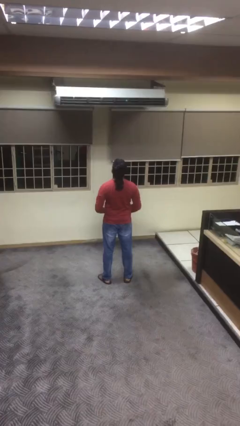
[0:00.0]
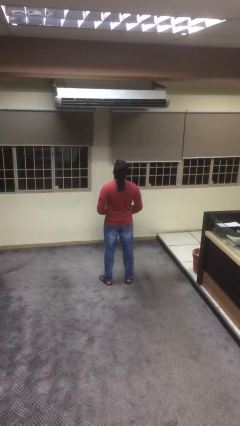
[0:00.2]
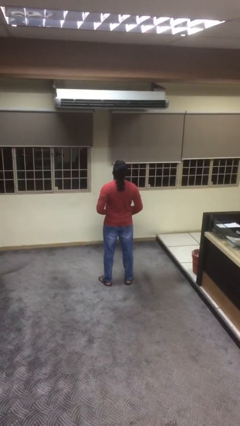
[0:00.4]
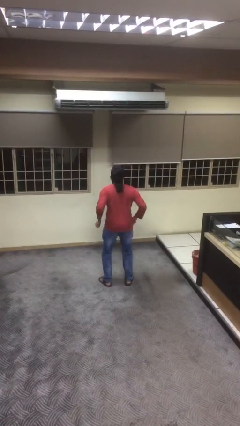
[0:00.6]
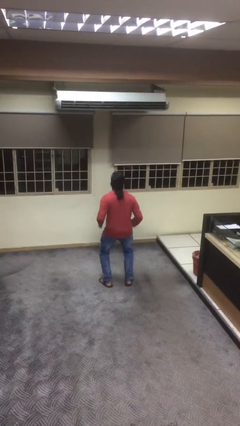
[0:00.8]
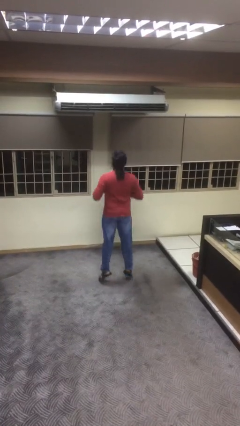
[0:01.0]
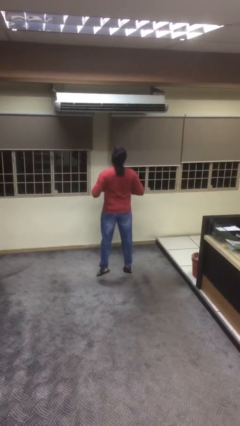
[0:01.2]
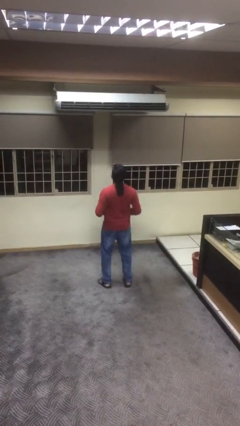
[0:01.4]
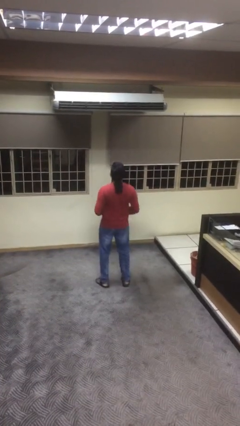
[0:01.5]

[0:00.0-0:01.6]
person jumps

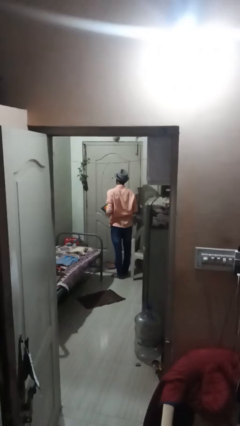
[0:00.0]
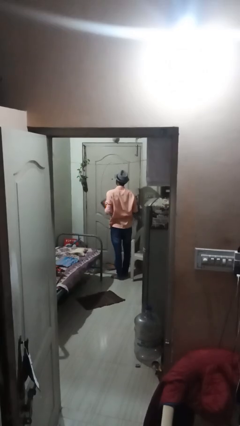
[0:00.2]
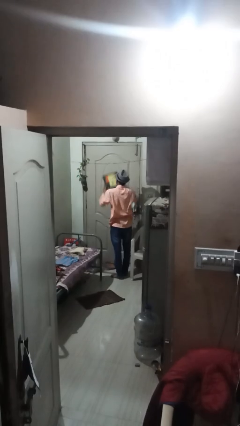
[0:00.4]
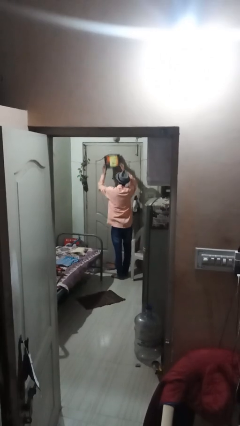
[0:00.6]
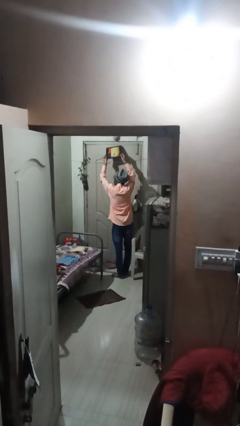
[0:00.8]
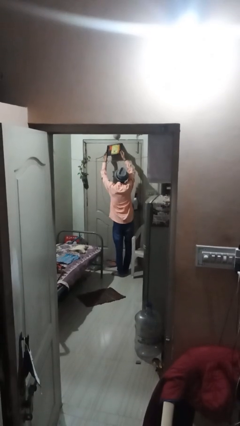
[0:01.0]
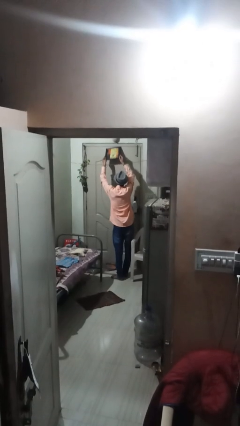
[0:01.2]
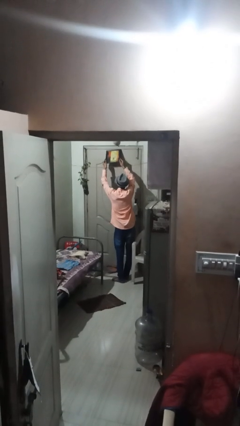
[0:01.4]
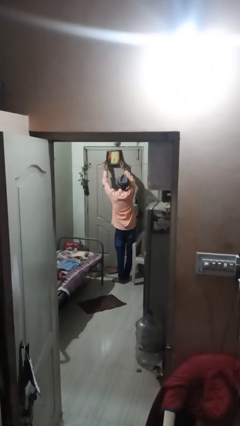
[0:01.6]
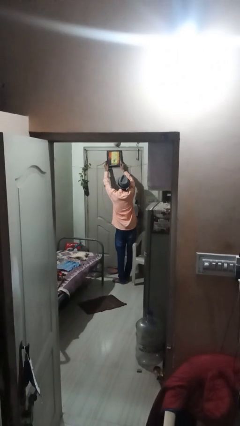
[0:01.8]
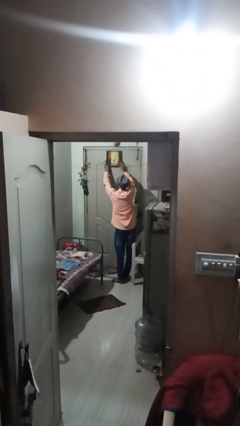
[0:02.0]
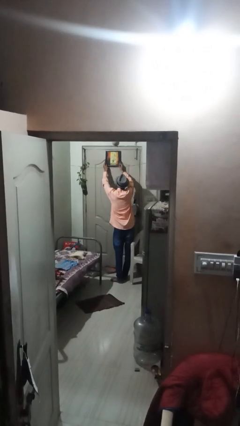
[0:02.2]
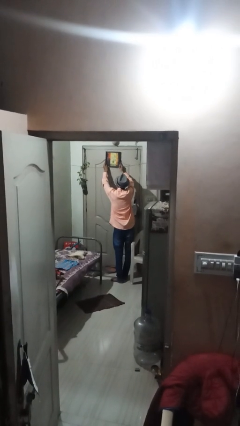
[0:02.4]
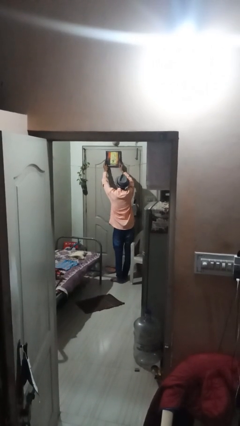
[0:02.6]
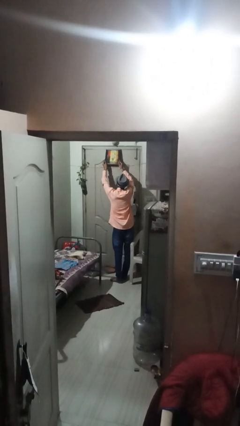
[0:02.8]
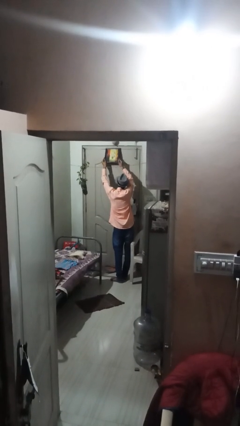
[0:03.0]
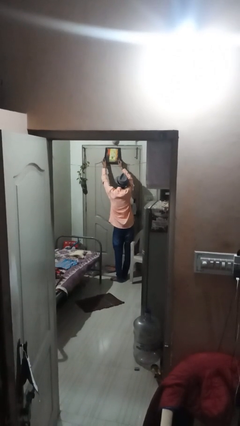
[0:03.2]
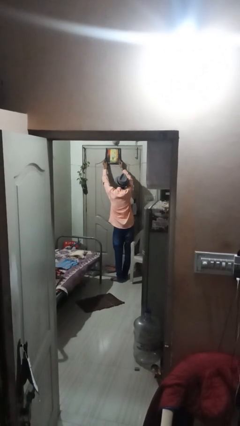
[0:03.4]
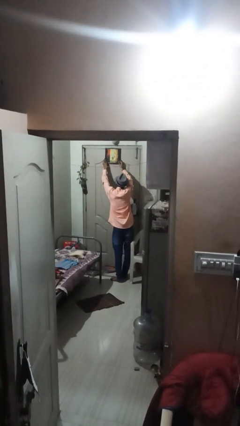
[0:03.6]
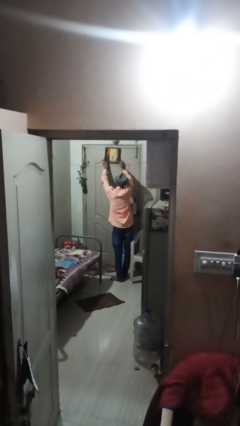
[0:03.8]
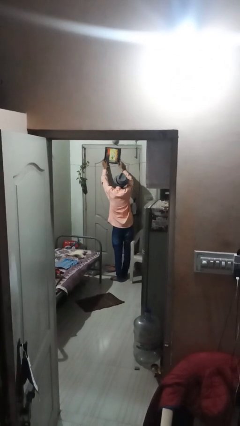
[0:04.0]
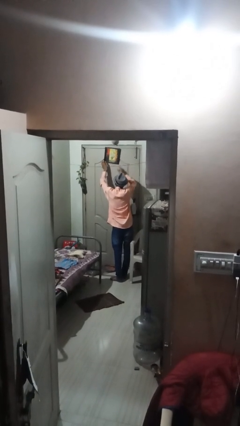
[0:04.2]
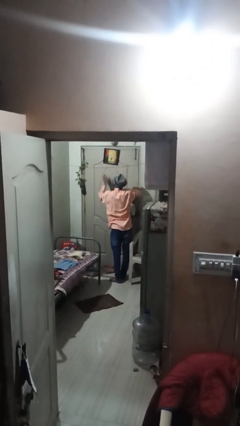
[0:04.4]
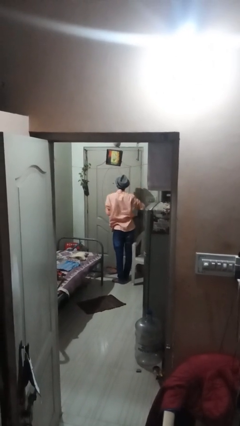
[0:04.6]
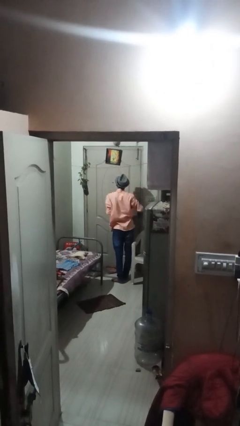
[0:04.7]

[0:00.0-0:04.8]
person puts up picture frame

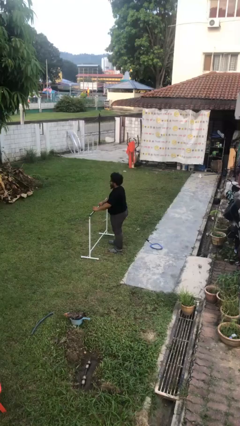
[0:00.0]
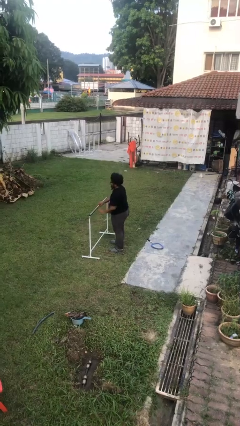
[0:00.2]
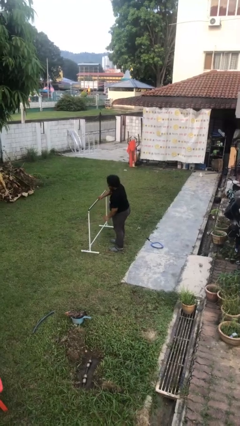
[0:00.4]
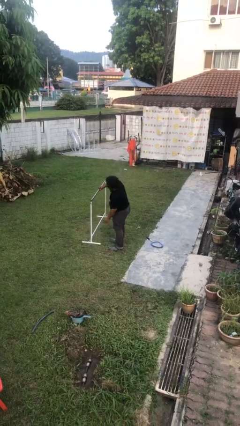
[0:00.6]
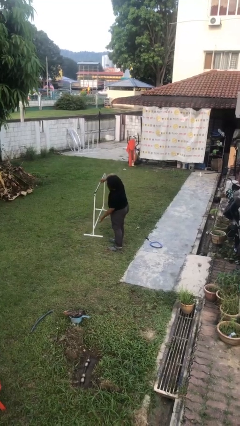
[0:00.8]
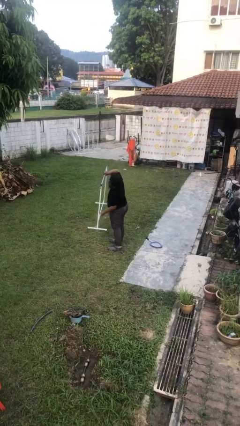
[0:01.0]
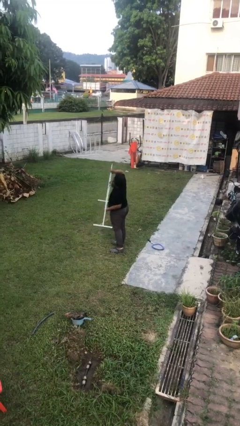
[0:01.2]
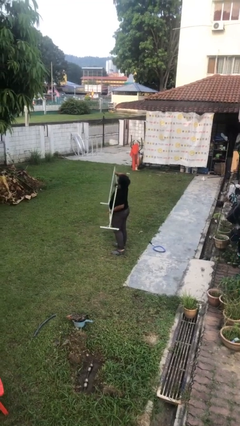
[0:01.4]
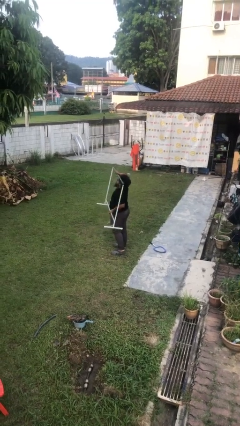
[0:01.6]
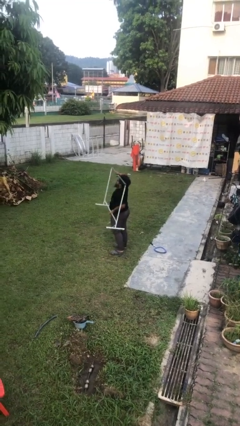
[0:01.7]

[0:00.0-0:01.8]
person picks up object from floor

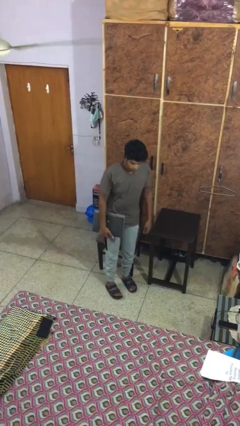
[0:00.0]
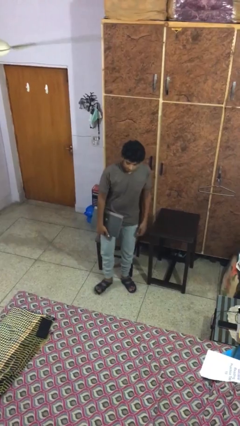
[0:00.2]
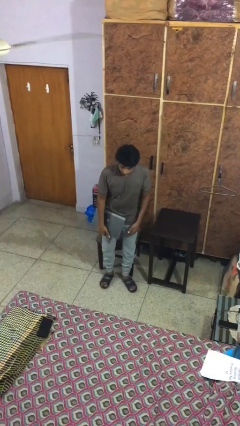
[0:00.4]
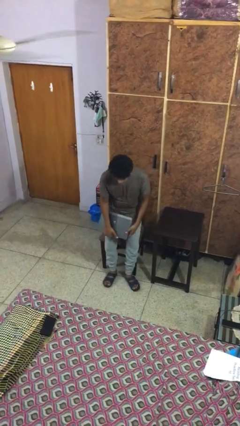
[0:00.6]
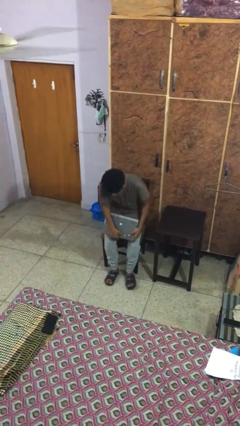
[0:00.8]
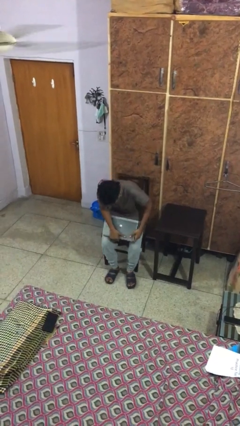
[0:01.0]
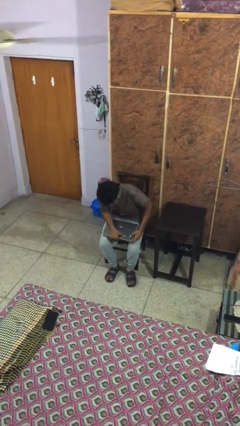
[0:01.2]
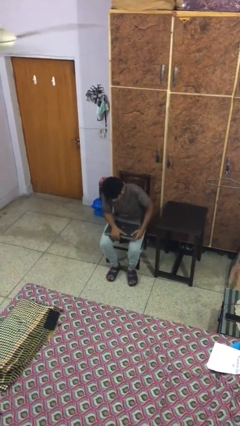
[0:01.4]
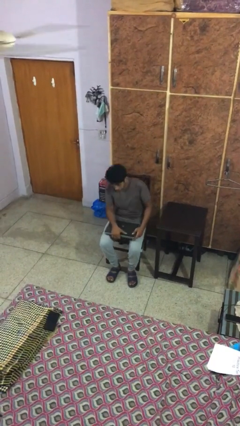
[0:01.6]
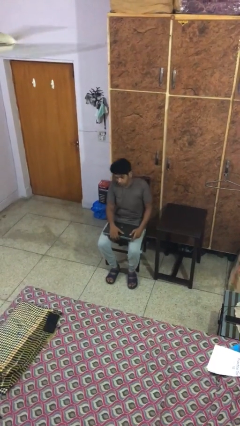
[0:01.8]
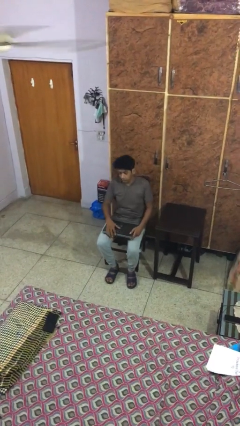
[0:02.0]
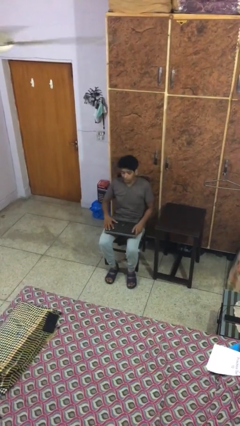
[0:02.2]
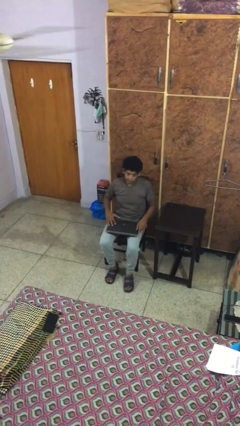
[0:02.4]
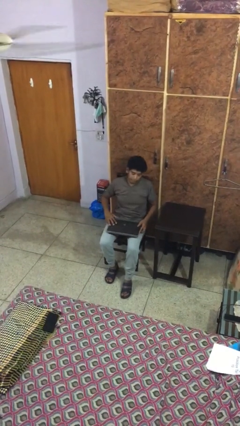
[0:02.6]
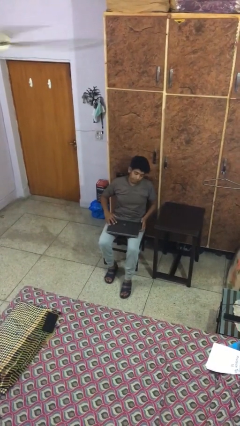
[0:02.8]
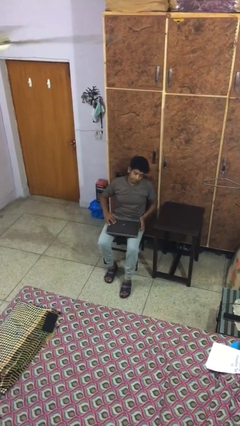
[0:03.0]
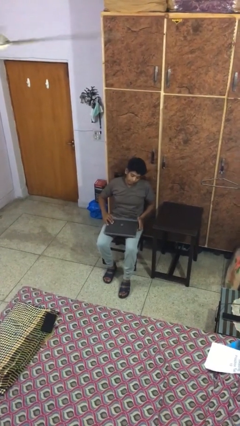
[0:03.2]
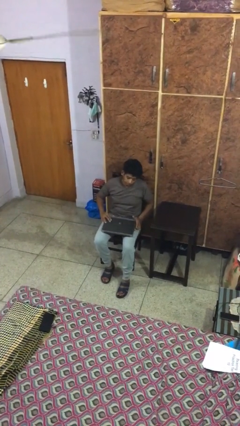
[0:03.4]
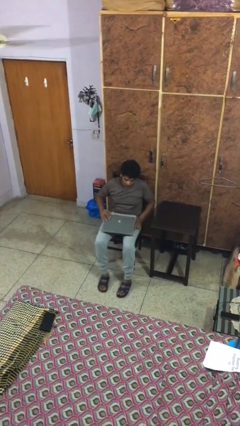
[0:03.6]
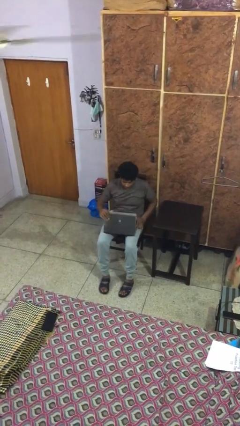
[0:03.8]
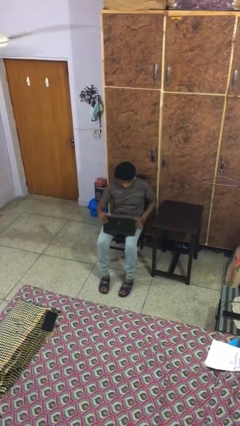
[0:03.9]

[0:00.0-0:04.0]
person sits down

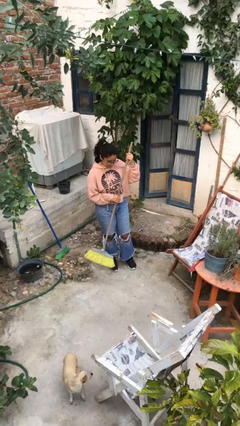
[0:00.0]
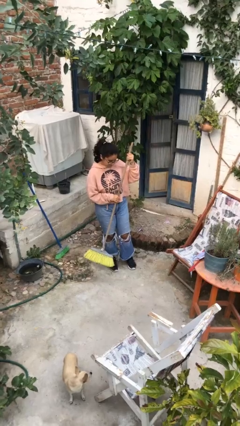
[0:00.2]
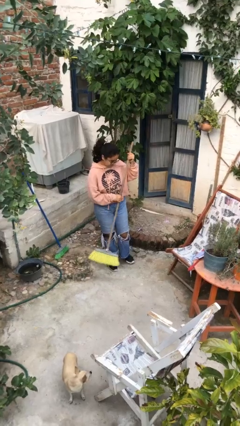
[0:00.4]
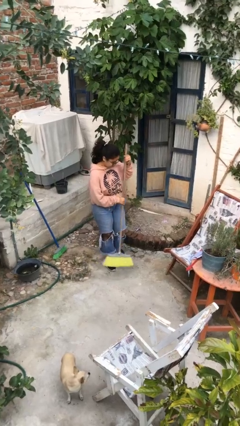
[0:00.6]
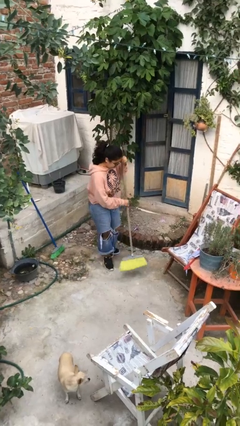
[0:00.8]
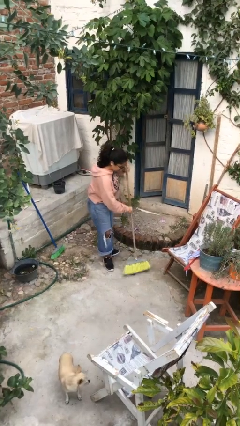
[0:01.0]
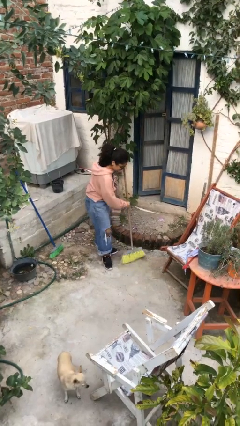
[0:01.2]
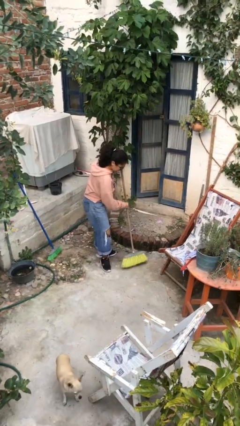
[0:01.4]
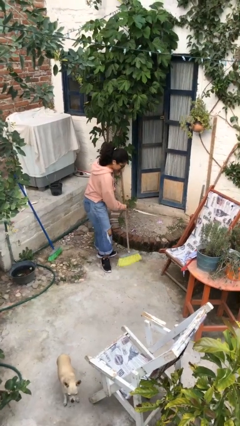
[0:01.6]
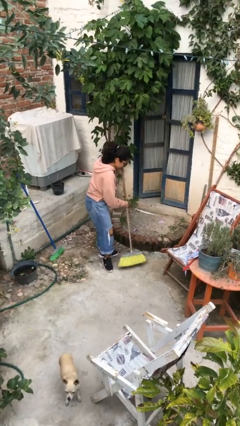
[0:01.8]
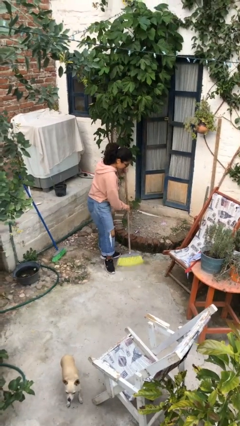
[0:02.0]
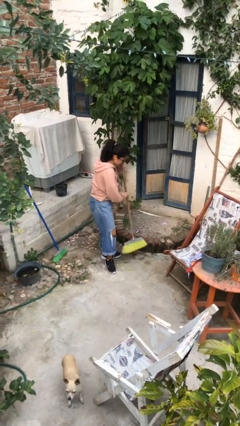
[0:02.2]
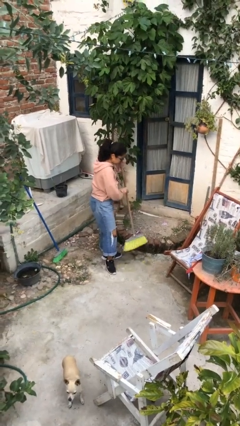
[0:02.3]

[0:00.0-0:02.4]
person sweeps floor

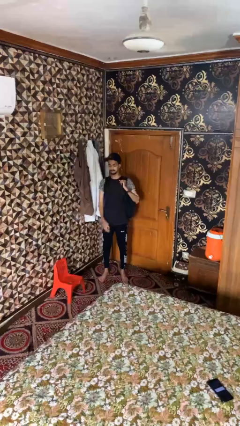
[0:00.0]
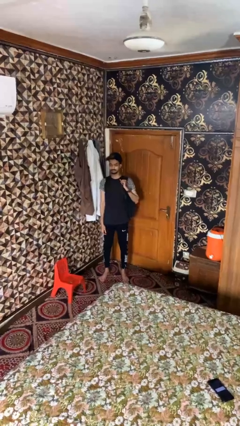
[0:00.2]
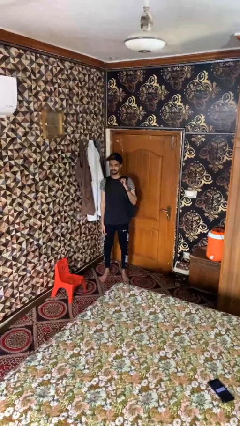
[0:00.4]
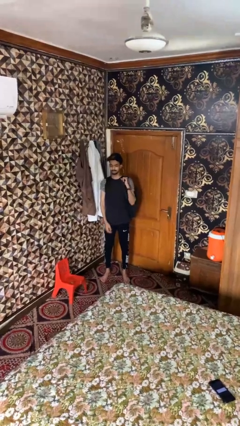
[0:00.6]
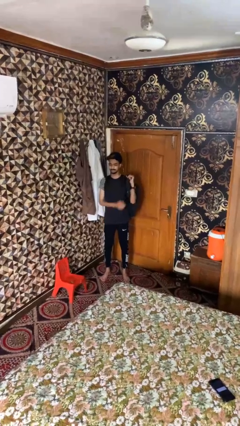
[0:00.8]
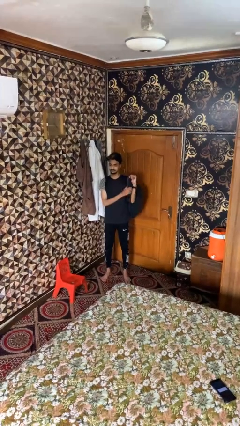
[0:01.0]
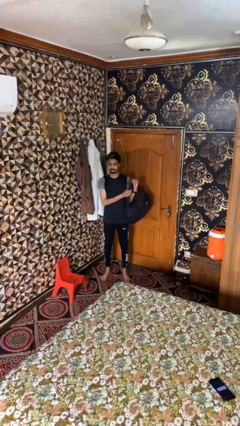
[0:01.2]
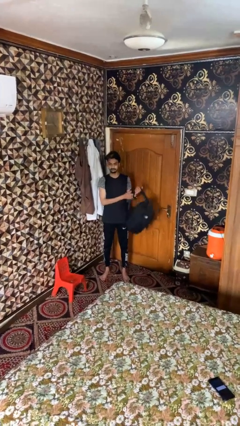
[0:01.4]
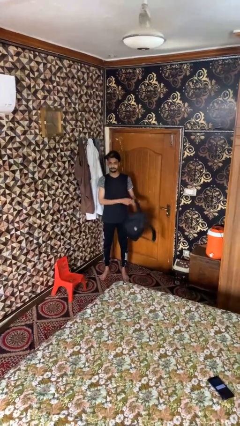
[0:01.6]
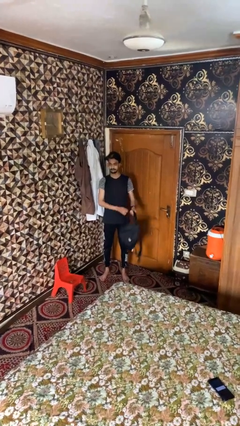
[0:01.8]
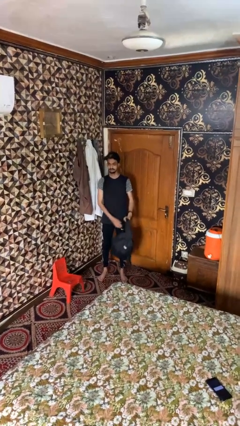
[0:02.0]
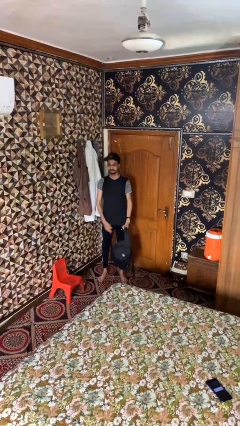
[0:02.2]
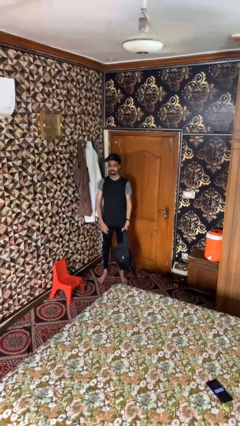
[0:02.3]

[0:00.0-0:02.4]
person takes off backpack
